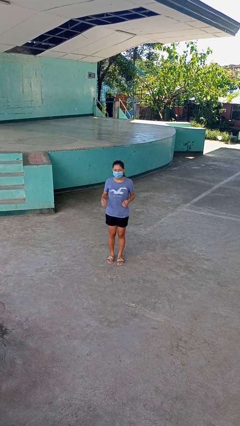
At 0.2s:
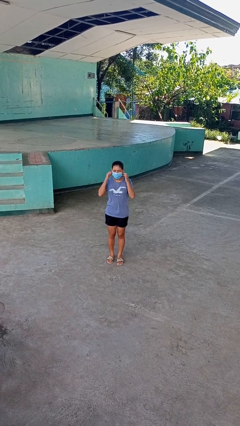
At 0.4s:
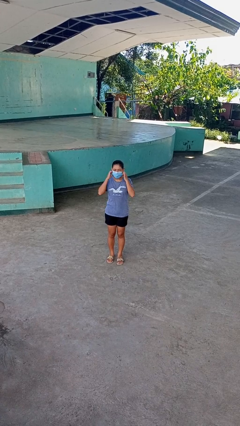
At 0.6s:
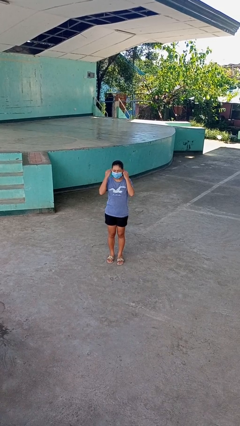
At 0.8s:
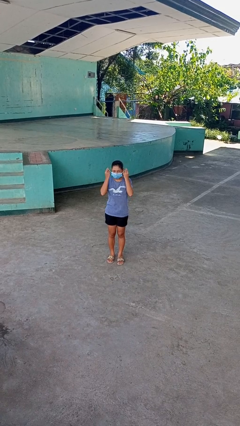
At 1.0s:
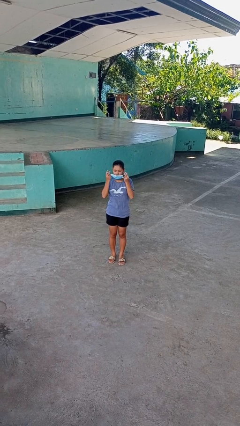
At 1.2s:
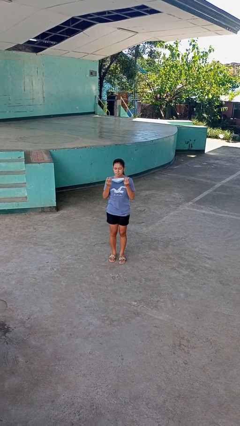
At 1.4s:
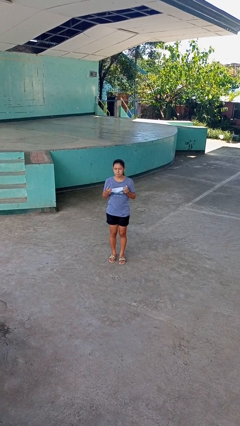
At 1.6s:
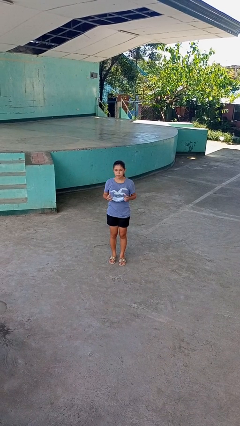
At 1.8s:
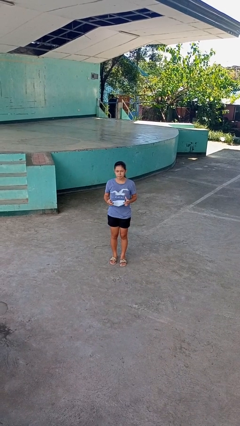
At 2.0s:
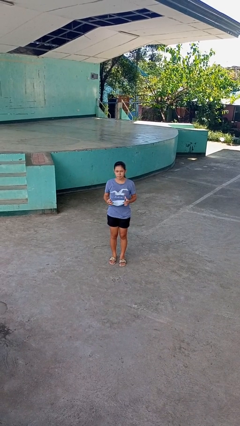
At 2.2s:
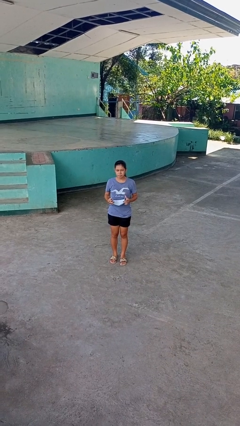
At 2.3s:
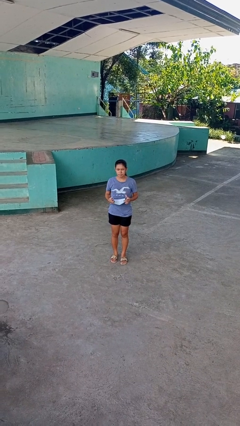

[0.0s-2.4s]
person takes off facemask

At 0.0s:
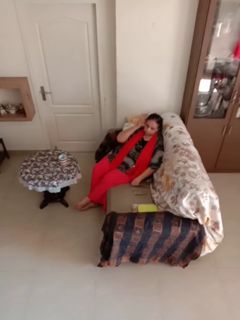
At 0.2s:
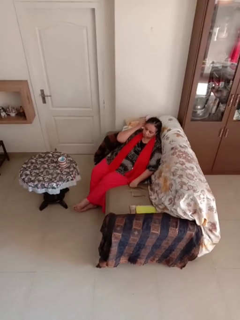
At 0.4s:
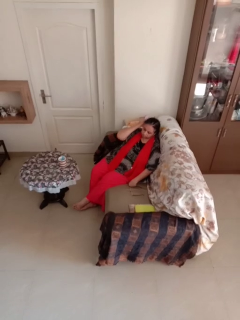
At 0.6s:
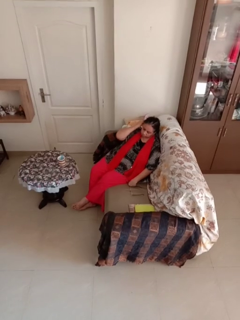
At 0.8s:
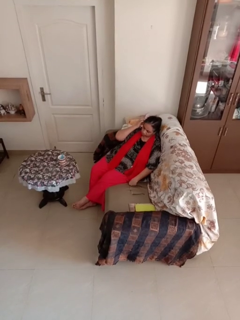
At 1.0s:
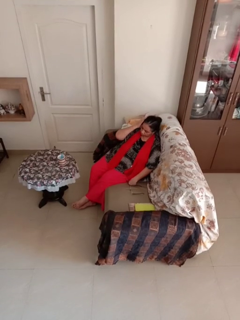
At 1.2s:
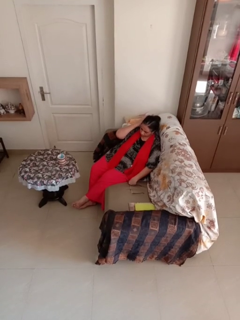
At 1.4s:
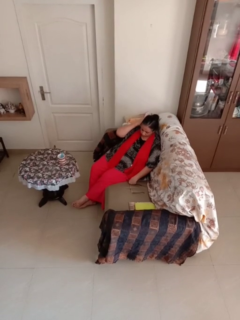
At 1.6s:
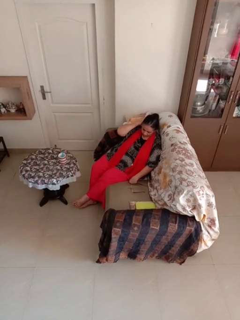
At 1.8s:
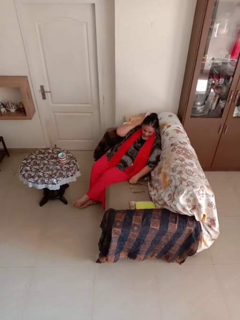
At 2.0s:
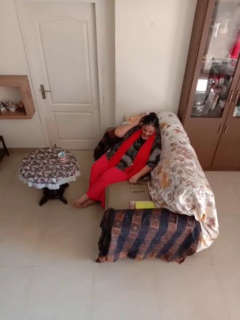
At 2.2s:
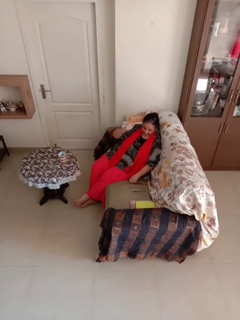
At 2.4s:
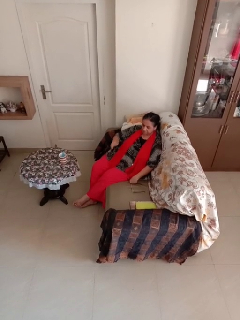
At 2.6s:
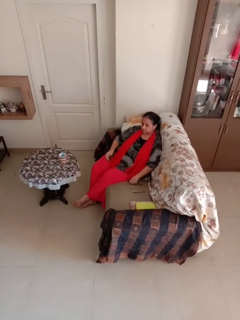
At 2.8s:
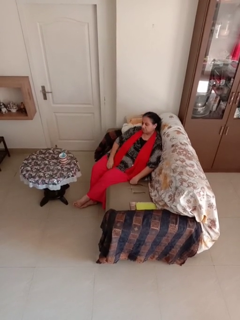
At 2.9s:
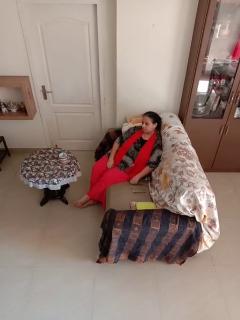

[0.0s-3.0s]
person strokes hair

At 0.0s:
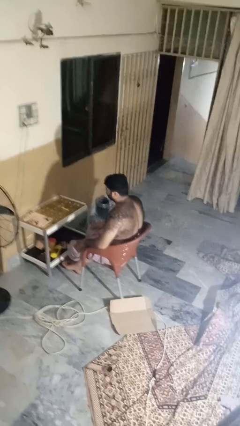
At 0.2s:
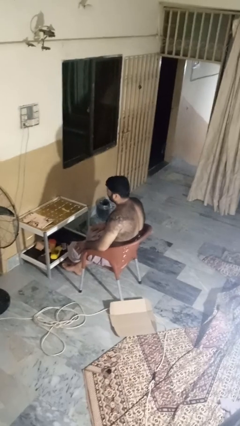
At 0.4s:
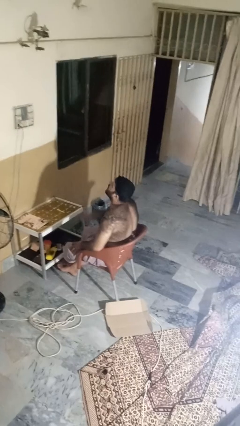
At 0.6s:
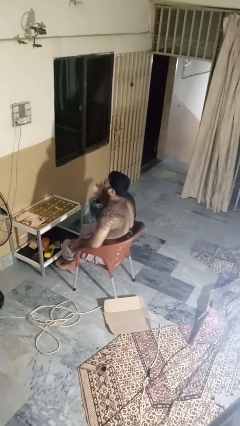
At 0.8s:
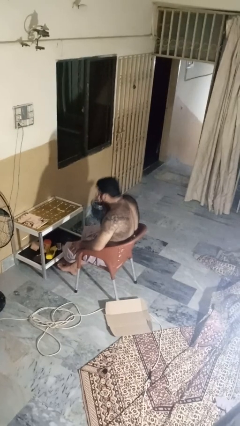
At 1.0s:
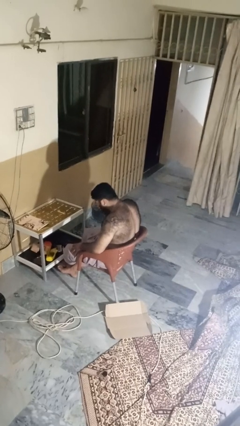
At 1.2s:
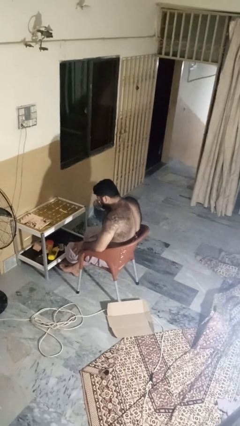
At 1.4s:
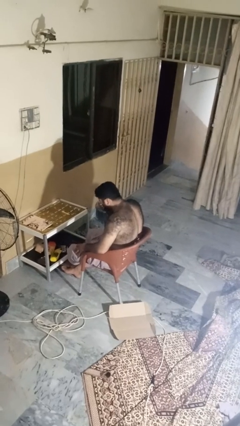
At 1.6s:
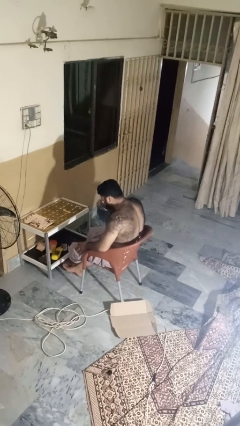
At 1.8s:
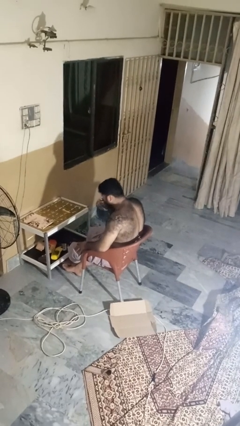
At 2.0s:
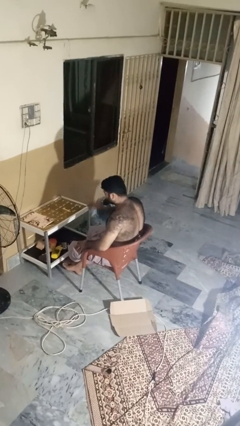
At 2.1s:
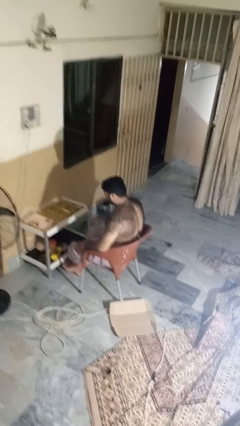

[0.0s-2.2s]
person sneezes into hand

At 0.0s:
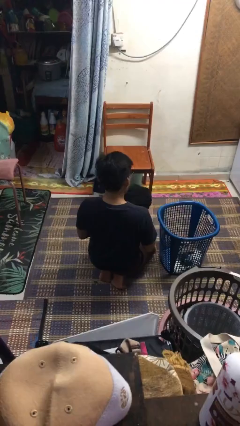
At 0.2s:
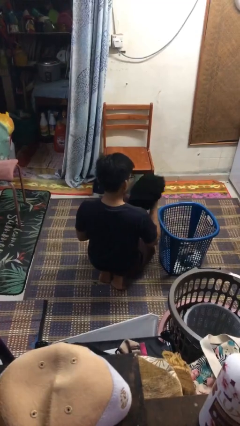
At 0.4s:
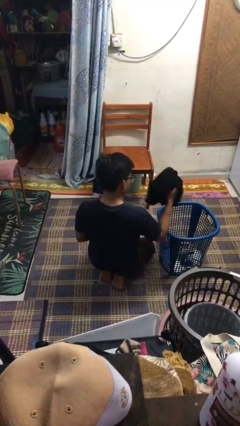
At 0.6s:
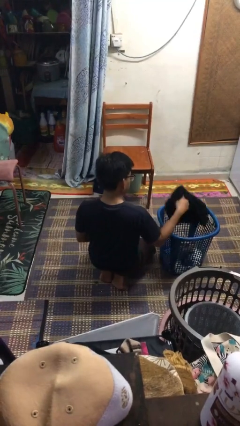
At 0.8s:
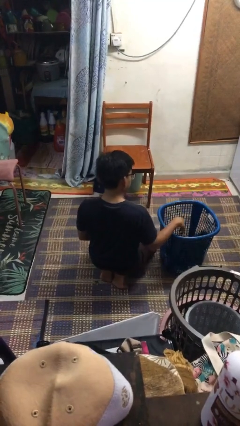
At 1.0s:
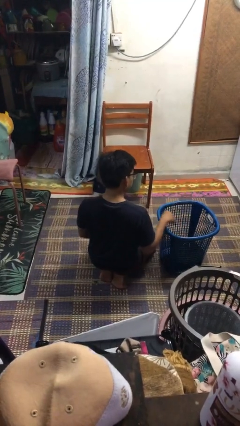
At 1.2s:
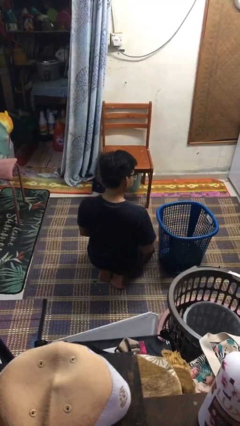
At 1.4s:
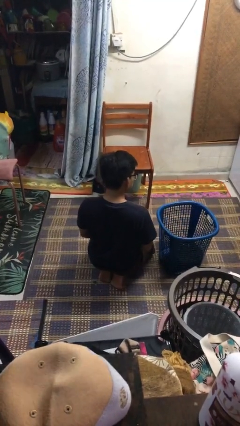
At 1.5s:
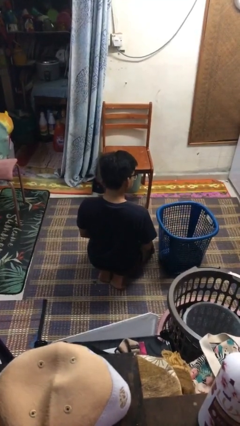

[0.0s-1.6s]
person puts object into basket

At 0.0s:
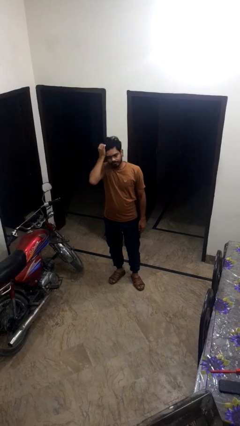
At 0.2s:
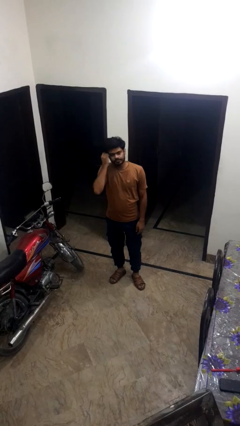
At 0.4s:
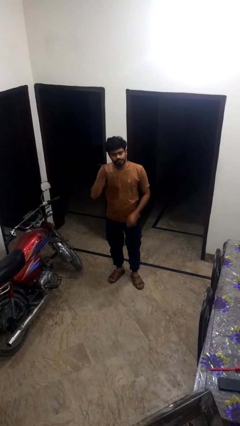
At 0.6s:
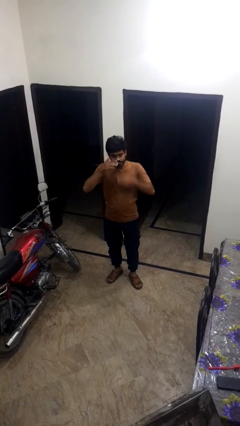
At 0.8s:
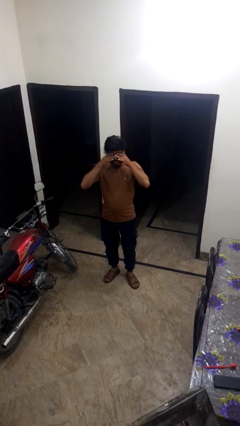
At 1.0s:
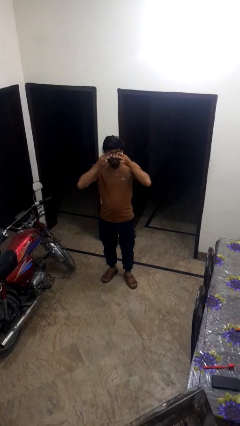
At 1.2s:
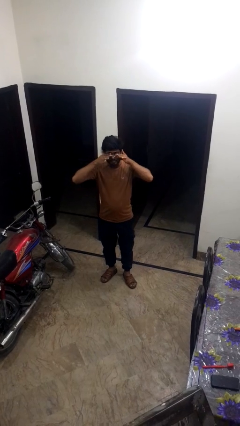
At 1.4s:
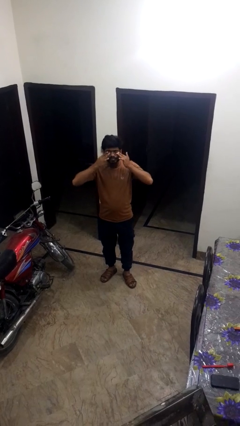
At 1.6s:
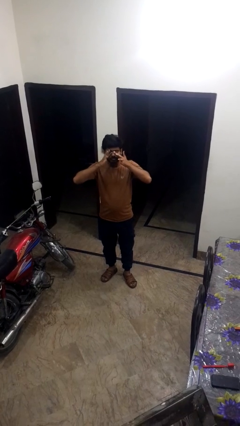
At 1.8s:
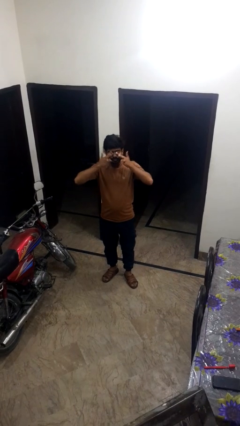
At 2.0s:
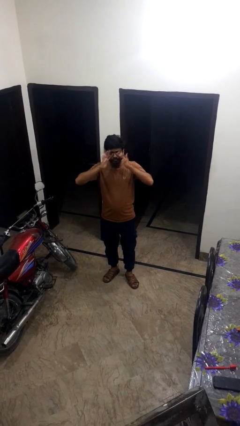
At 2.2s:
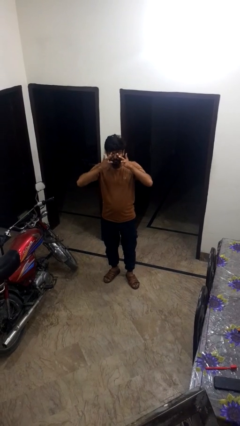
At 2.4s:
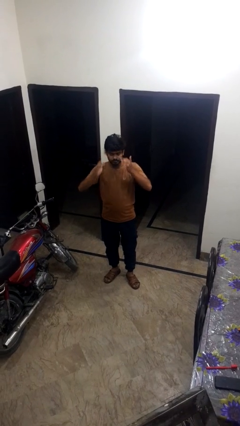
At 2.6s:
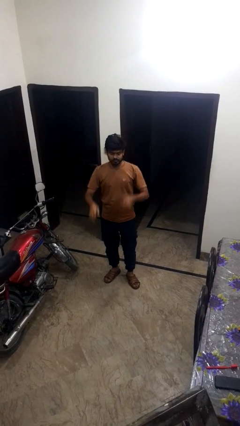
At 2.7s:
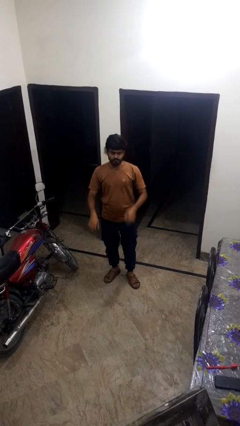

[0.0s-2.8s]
person rubs eyes

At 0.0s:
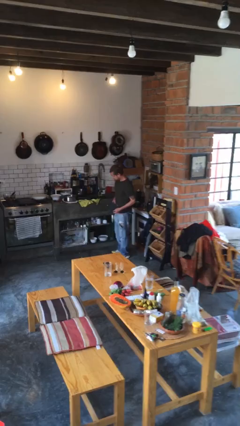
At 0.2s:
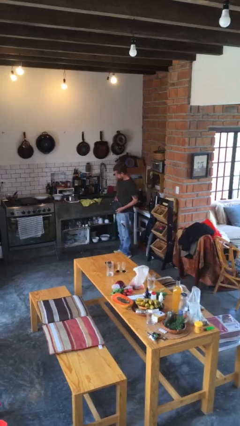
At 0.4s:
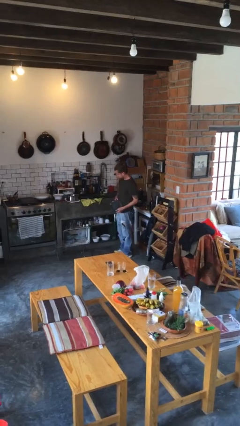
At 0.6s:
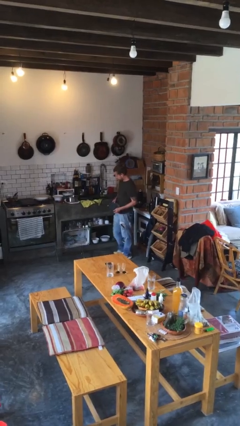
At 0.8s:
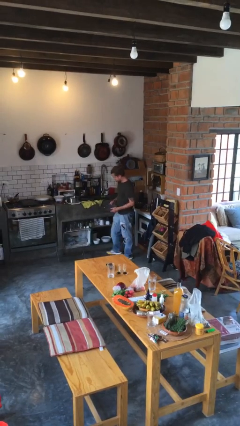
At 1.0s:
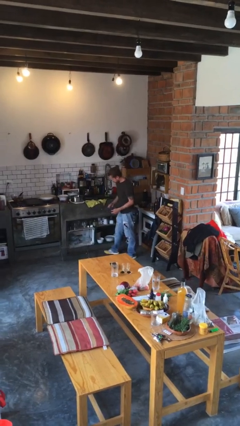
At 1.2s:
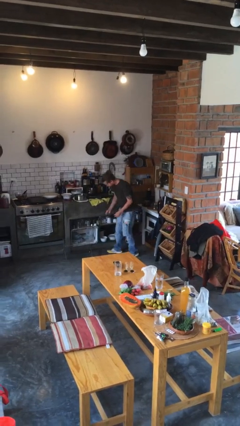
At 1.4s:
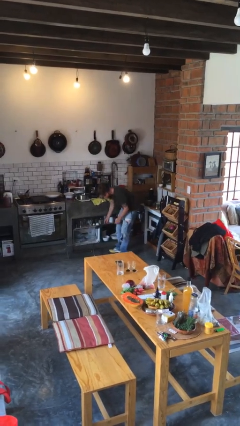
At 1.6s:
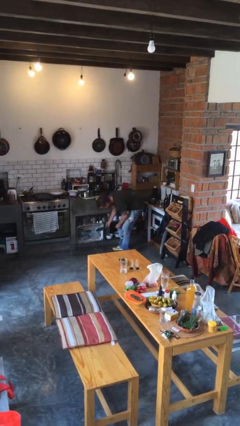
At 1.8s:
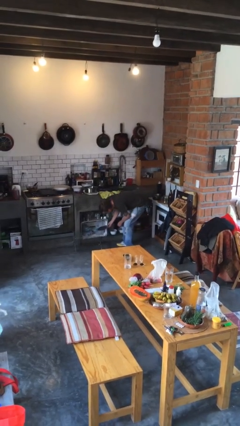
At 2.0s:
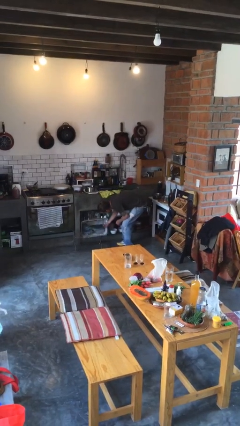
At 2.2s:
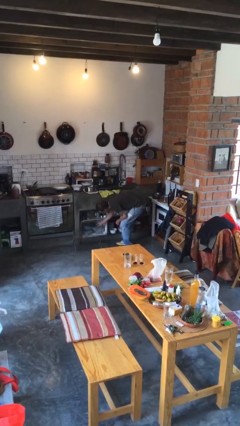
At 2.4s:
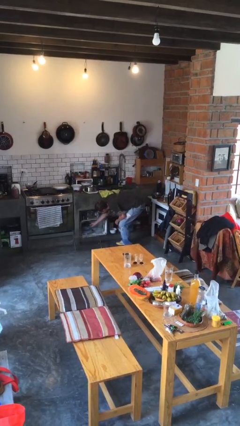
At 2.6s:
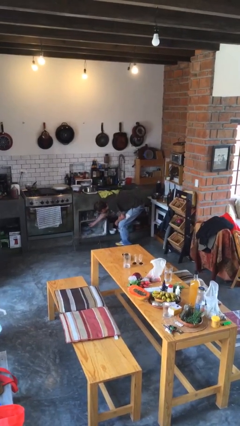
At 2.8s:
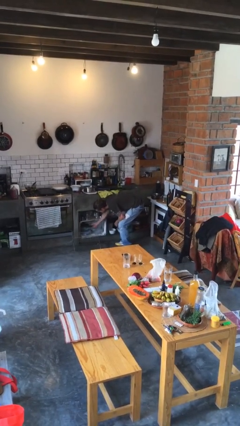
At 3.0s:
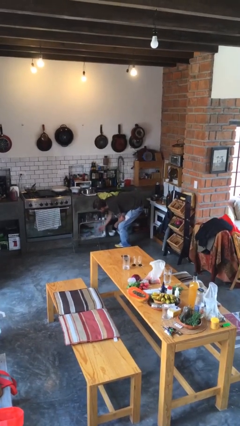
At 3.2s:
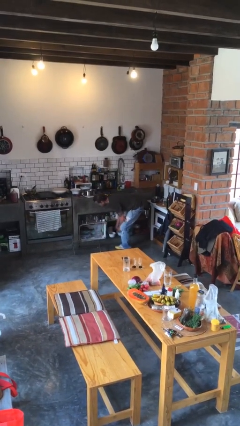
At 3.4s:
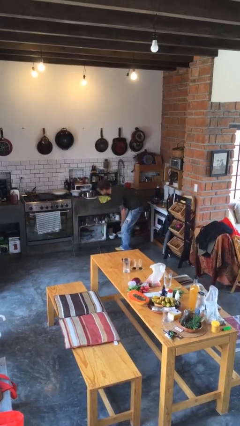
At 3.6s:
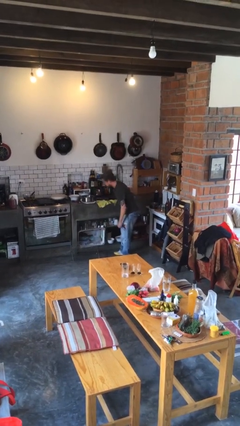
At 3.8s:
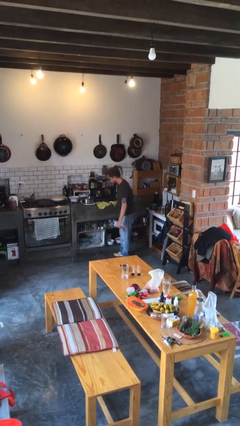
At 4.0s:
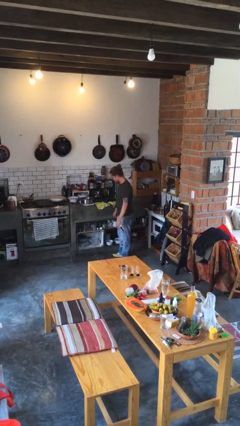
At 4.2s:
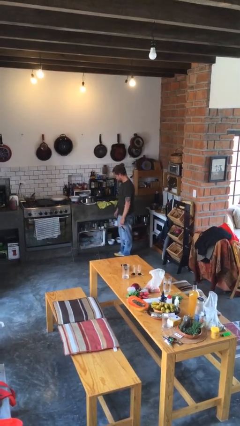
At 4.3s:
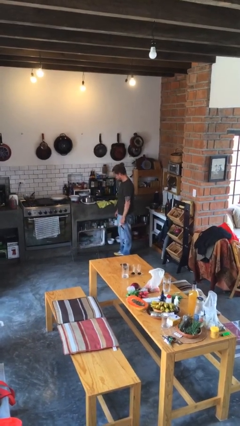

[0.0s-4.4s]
person puts down object into cabinet

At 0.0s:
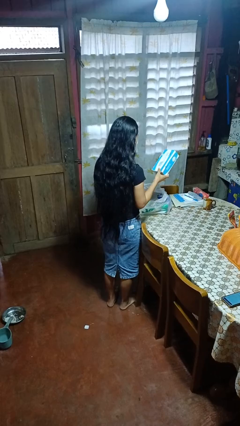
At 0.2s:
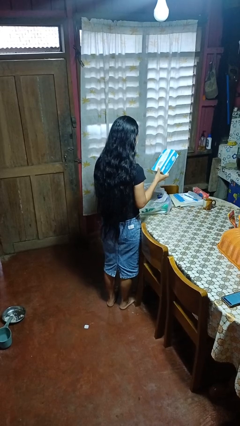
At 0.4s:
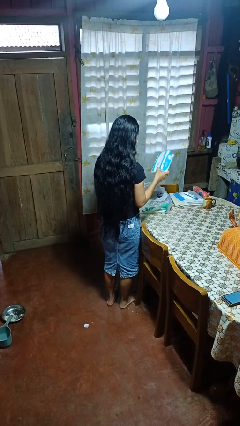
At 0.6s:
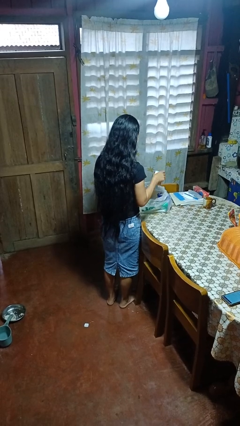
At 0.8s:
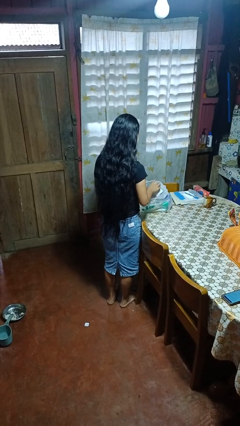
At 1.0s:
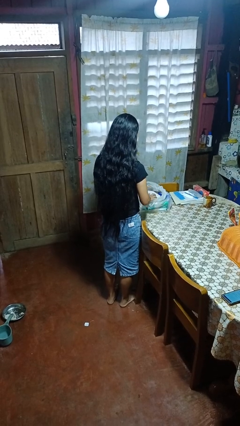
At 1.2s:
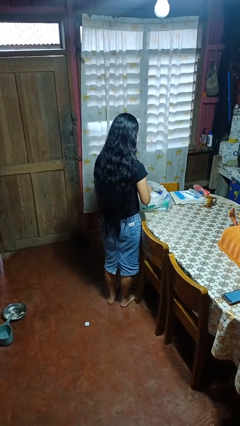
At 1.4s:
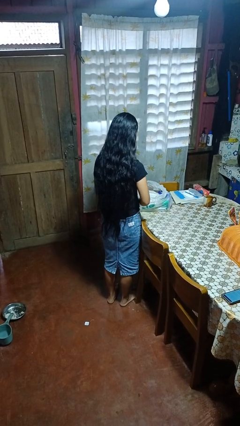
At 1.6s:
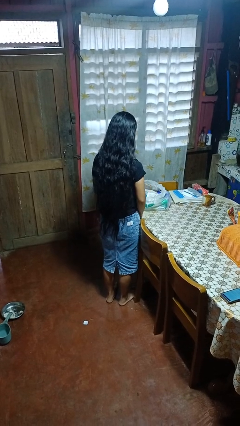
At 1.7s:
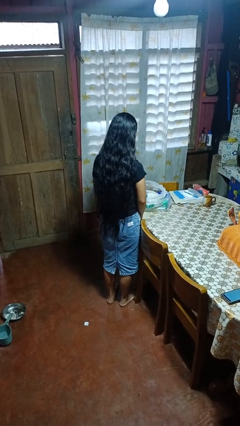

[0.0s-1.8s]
person puts object into bag
